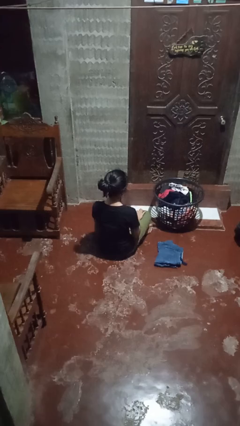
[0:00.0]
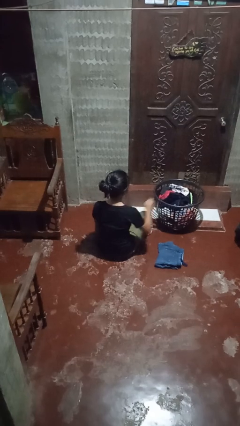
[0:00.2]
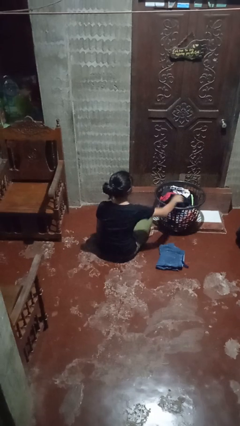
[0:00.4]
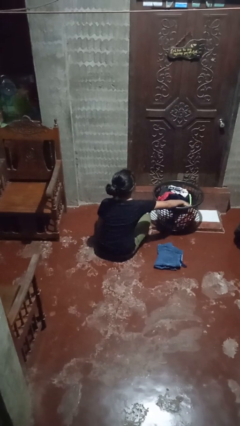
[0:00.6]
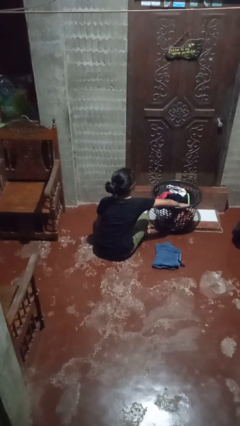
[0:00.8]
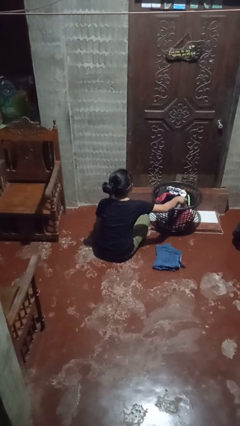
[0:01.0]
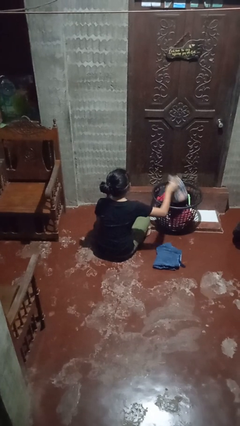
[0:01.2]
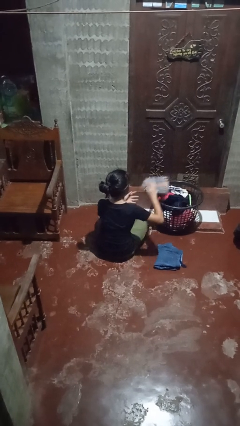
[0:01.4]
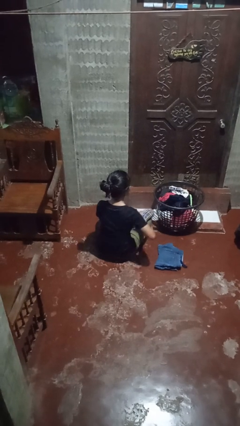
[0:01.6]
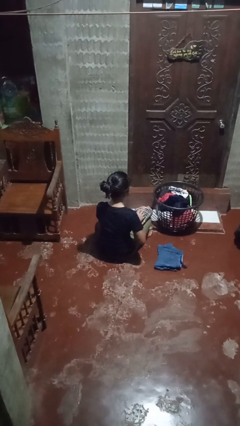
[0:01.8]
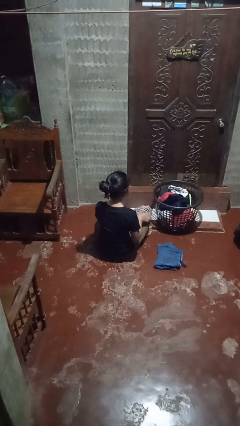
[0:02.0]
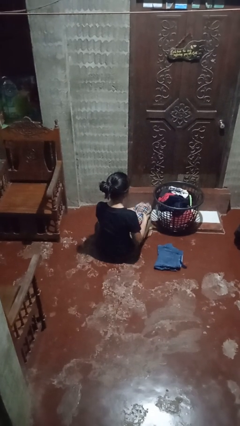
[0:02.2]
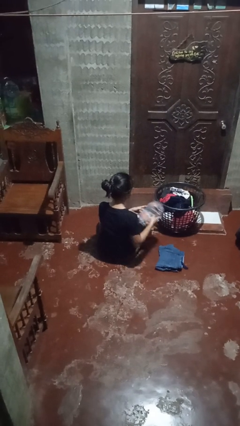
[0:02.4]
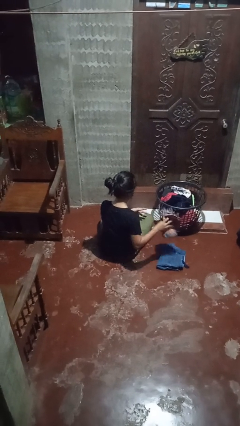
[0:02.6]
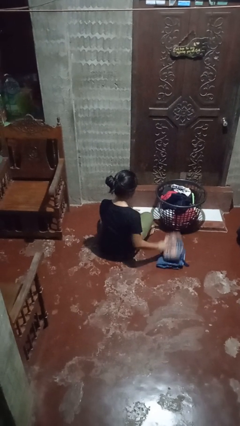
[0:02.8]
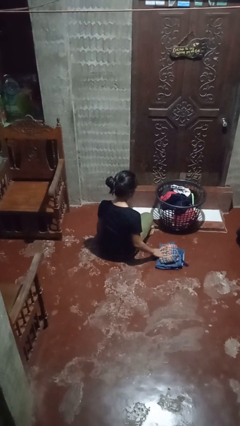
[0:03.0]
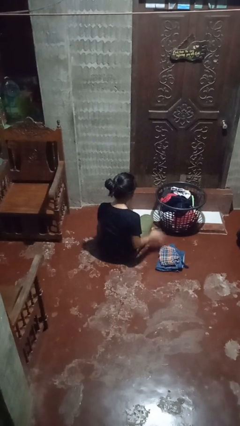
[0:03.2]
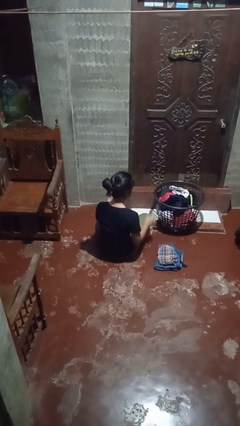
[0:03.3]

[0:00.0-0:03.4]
person folds pants

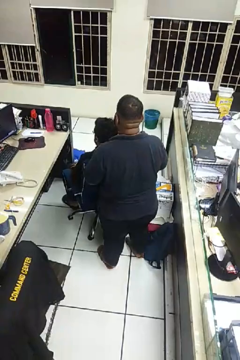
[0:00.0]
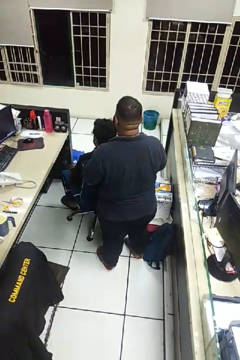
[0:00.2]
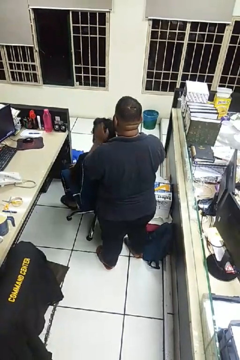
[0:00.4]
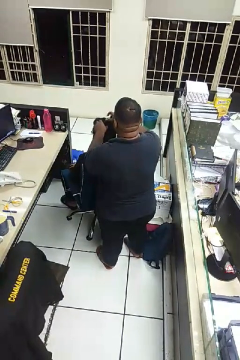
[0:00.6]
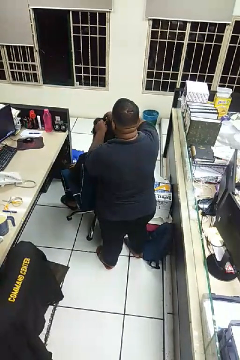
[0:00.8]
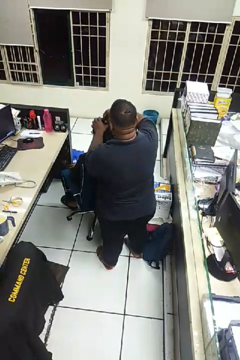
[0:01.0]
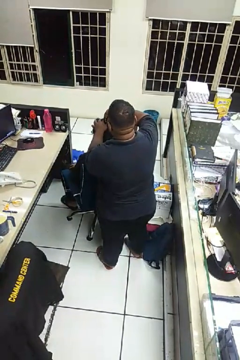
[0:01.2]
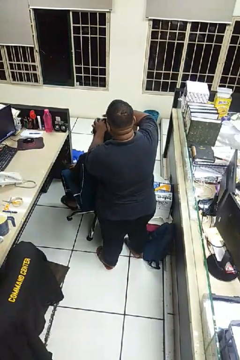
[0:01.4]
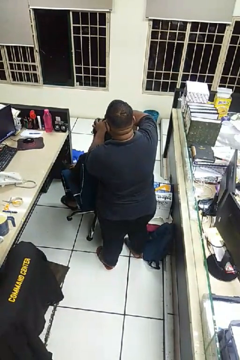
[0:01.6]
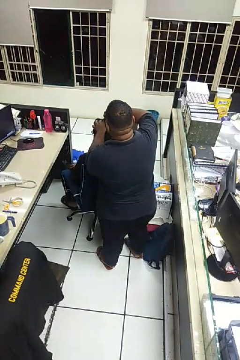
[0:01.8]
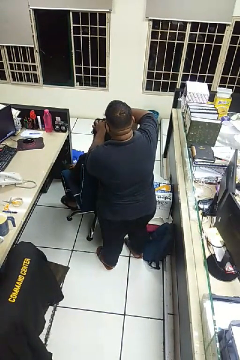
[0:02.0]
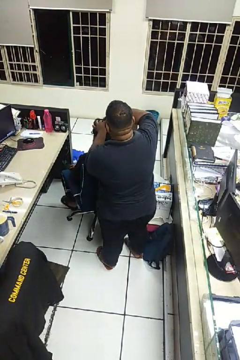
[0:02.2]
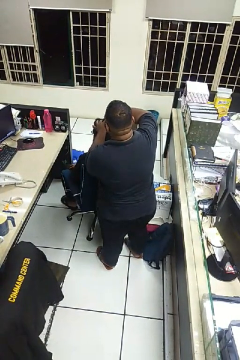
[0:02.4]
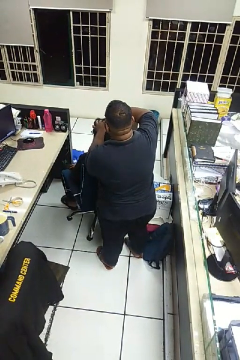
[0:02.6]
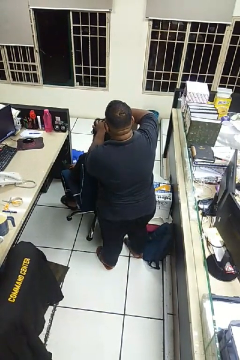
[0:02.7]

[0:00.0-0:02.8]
person braids hair of person

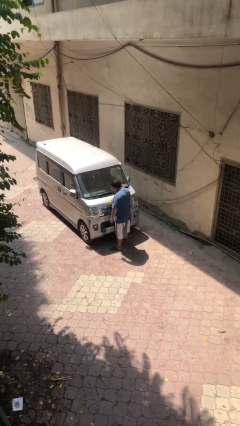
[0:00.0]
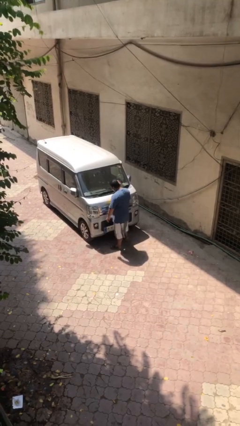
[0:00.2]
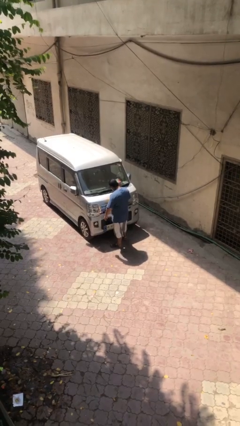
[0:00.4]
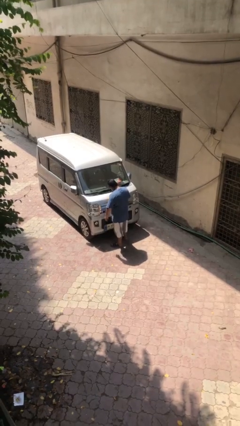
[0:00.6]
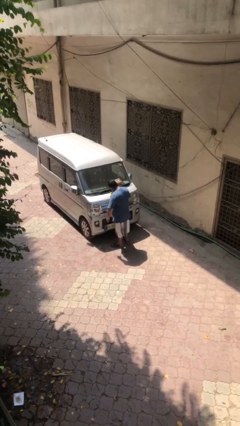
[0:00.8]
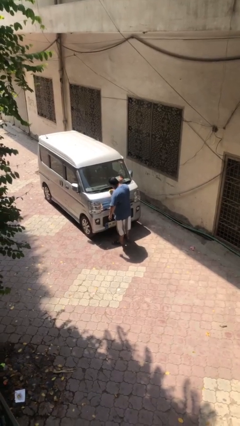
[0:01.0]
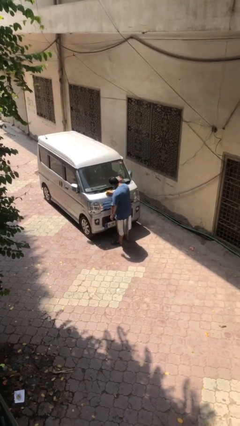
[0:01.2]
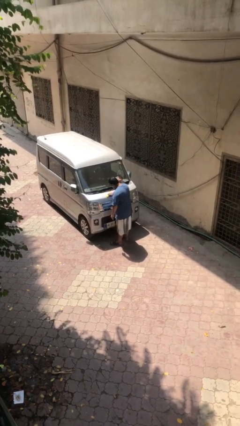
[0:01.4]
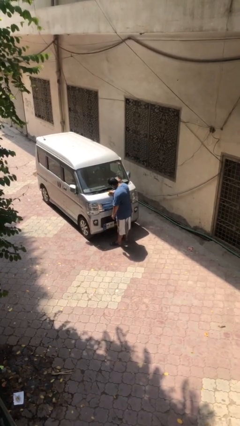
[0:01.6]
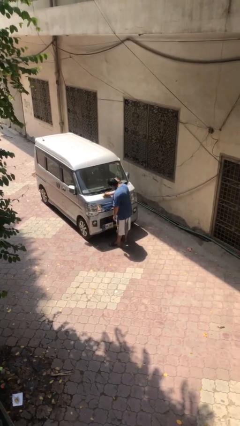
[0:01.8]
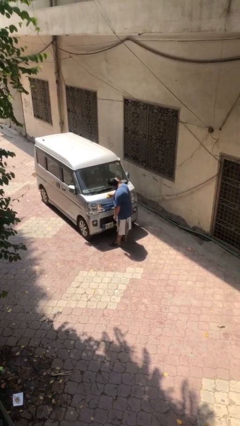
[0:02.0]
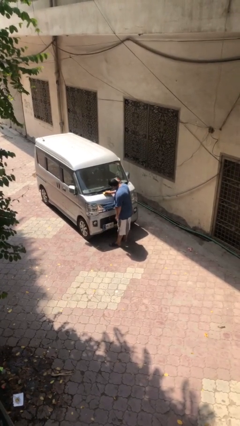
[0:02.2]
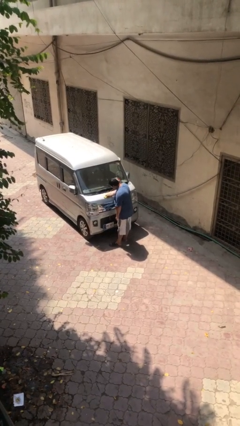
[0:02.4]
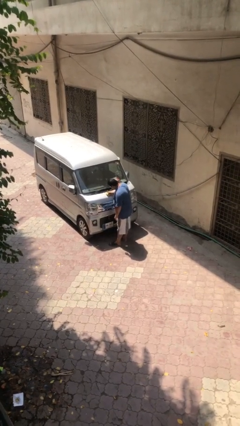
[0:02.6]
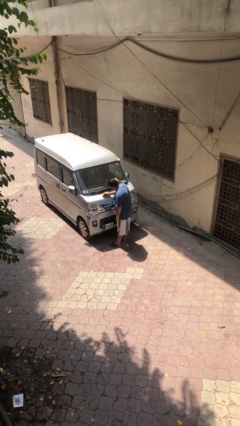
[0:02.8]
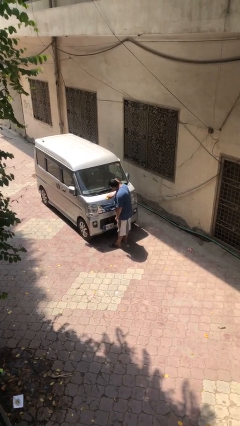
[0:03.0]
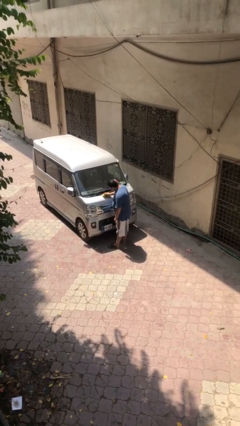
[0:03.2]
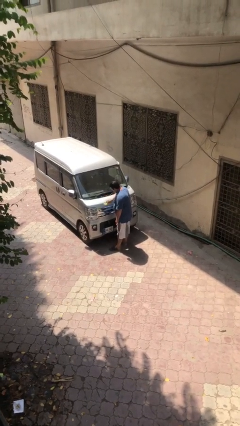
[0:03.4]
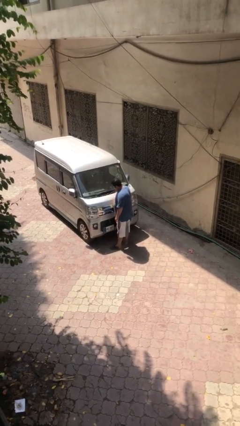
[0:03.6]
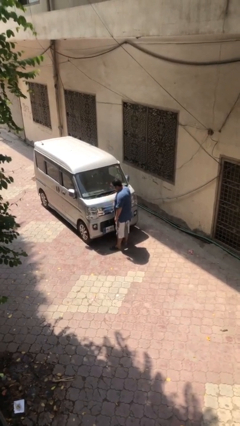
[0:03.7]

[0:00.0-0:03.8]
person polishes car with rag

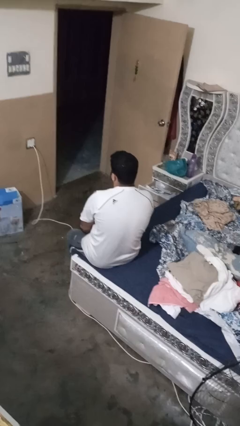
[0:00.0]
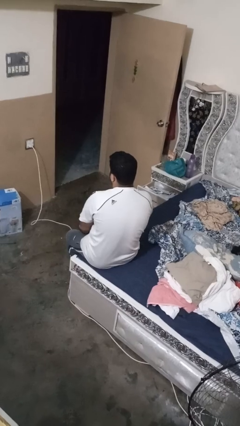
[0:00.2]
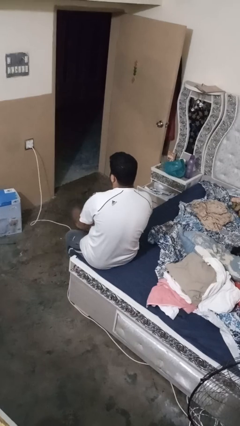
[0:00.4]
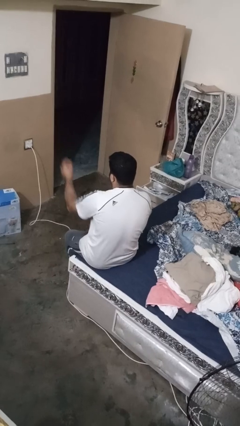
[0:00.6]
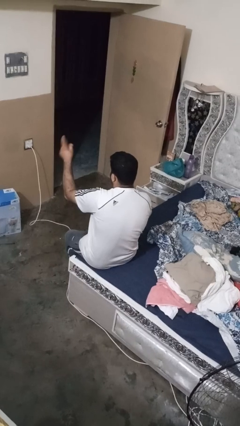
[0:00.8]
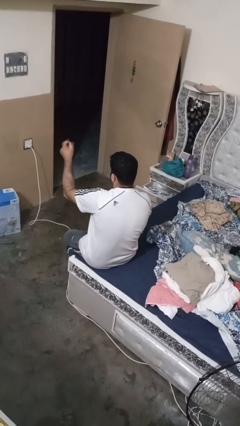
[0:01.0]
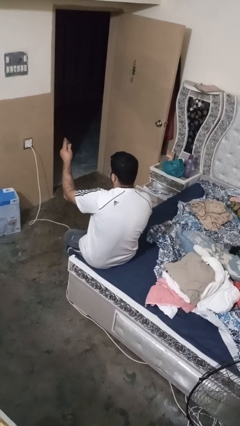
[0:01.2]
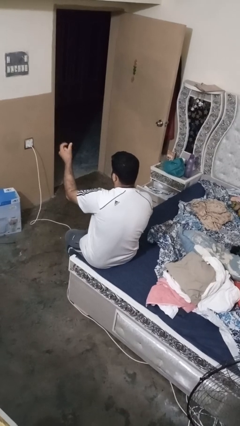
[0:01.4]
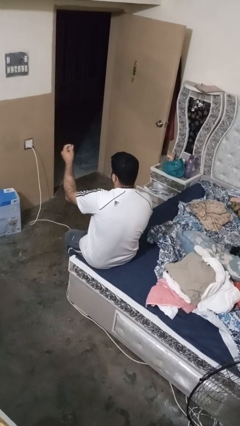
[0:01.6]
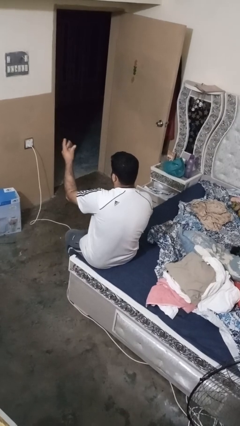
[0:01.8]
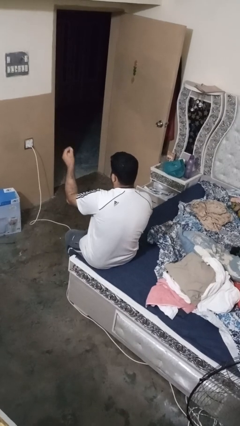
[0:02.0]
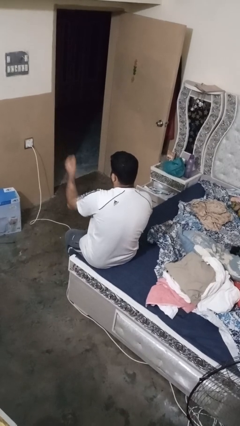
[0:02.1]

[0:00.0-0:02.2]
person snaps fingers

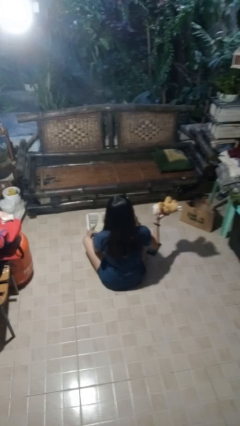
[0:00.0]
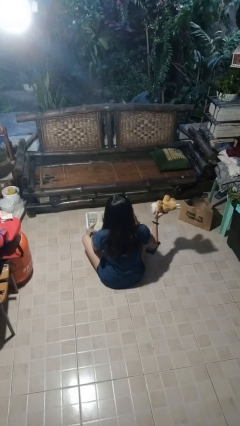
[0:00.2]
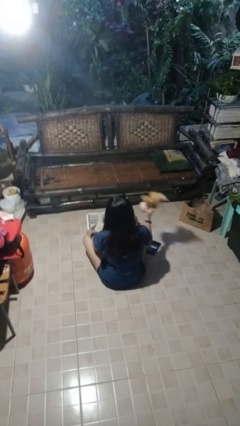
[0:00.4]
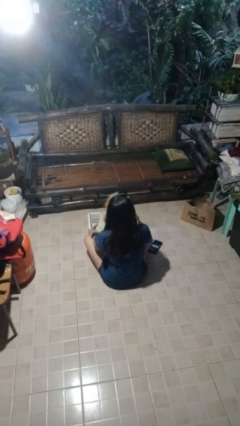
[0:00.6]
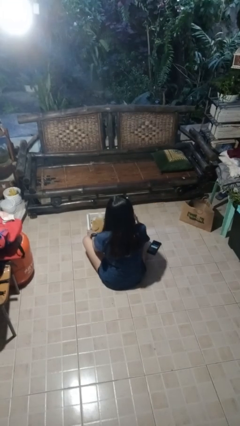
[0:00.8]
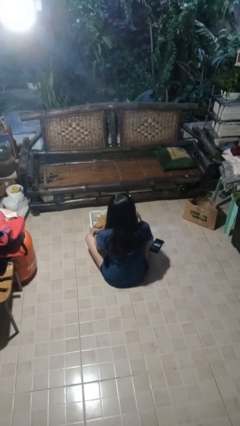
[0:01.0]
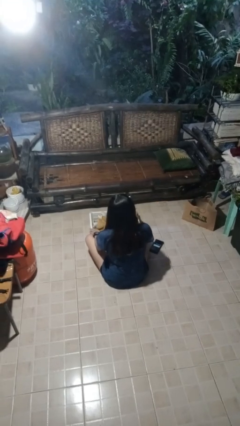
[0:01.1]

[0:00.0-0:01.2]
person puts object into basket

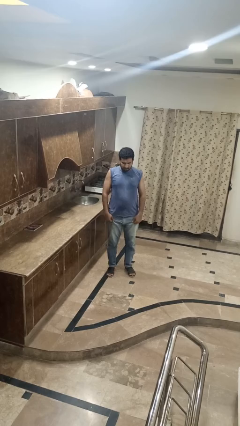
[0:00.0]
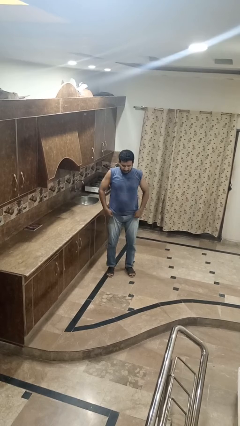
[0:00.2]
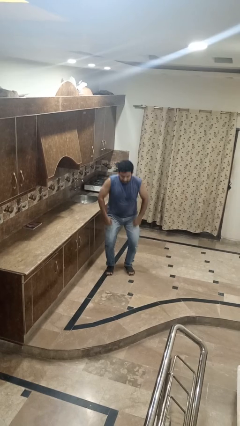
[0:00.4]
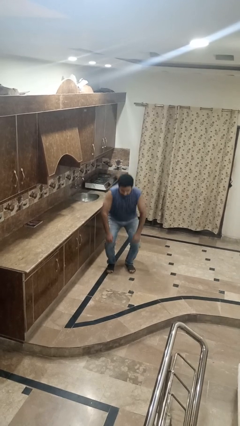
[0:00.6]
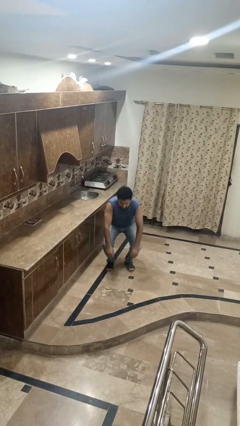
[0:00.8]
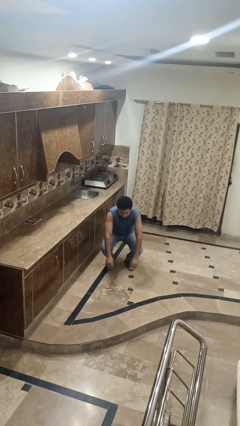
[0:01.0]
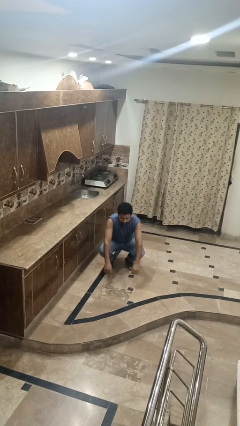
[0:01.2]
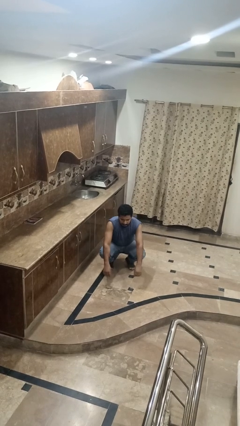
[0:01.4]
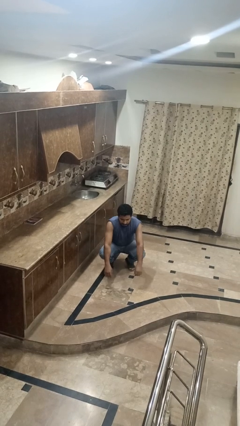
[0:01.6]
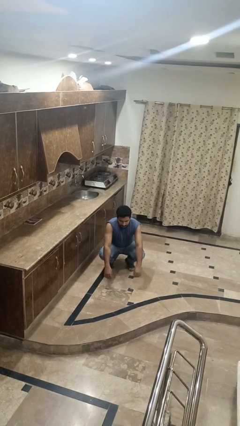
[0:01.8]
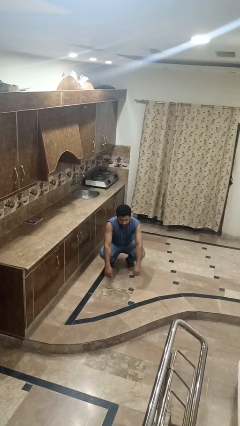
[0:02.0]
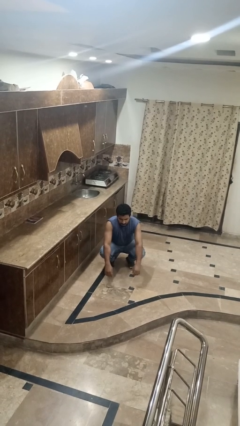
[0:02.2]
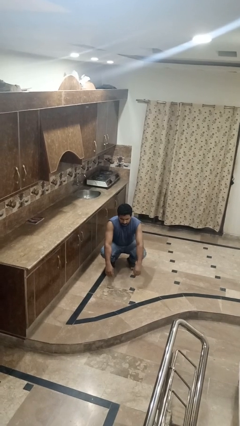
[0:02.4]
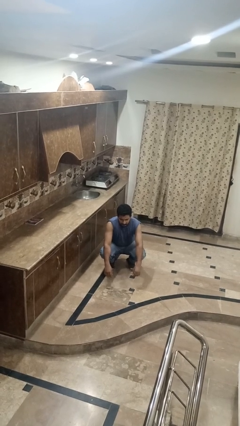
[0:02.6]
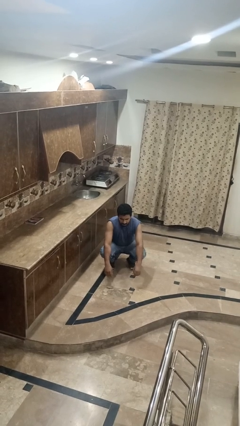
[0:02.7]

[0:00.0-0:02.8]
person squats

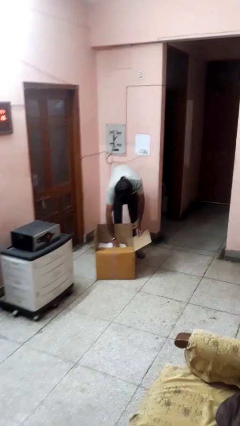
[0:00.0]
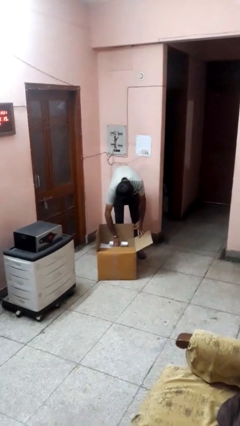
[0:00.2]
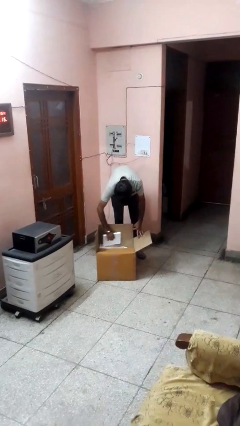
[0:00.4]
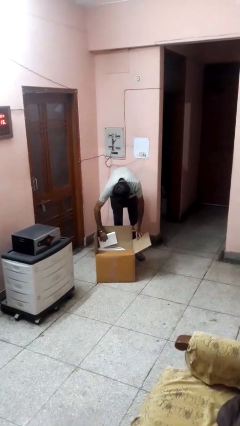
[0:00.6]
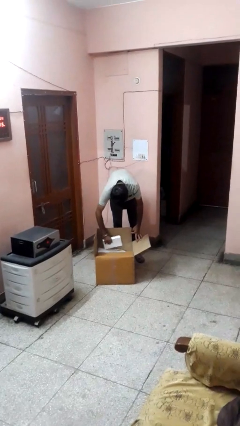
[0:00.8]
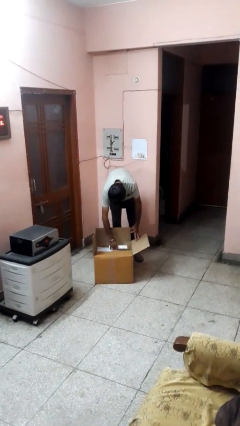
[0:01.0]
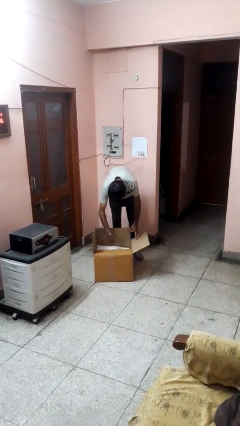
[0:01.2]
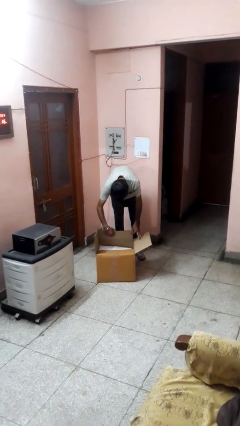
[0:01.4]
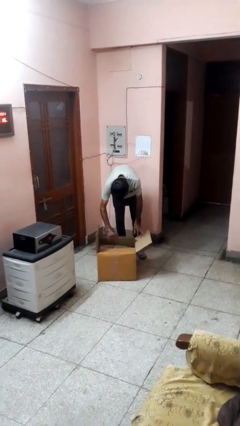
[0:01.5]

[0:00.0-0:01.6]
person searches in box
